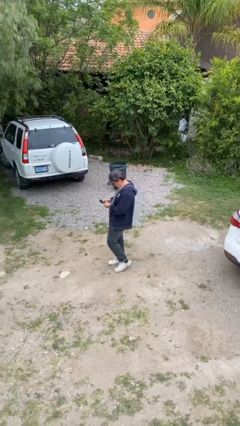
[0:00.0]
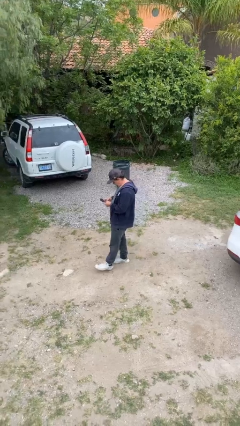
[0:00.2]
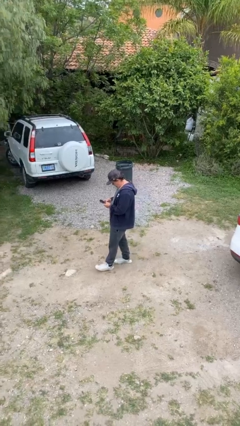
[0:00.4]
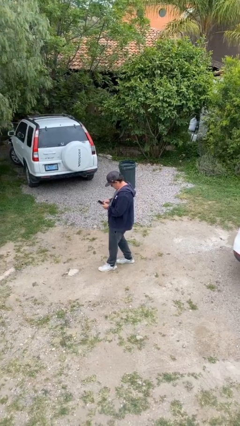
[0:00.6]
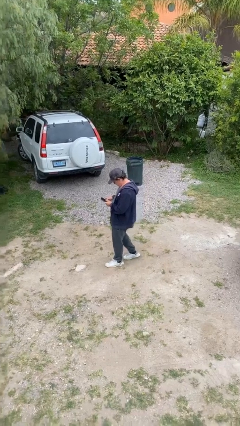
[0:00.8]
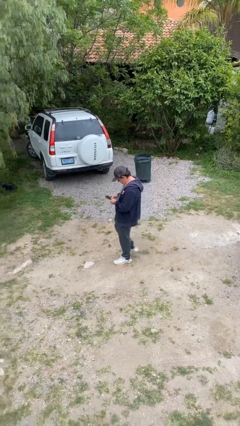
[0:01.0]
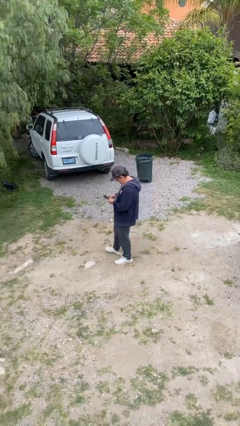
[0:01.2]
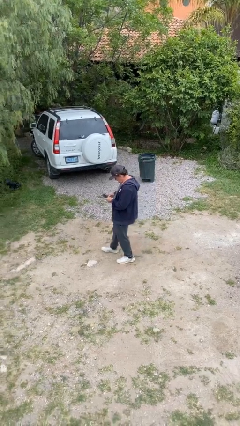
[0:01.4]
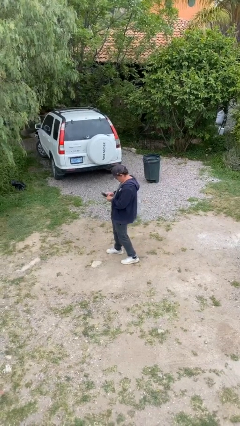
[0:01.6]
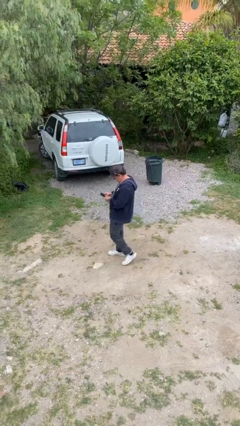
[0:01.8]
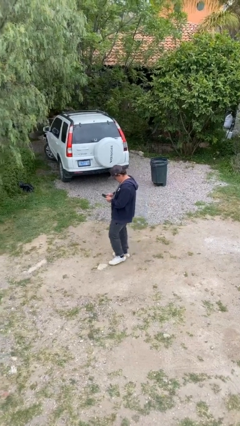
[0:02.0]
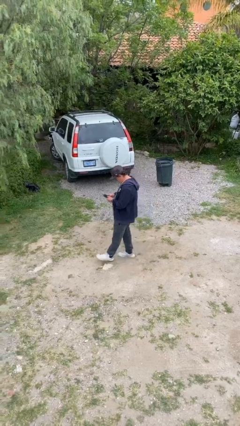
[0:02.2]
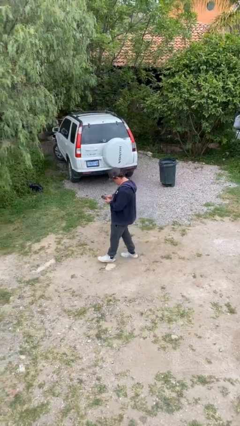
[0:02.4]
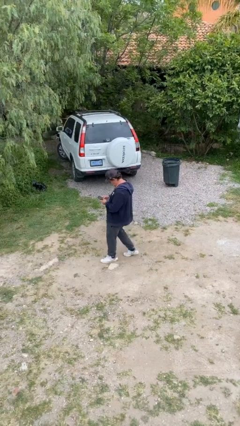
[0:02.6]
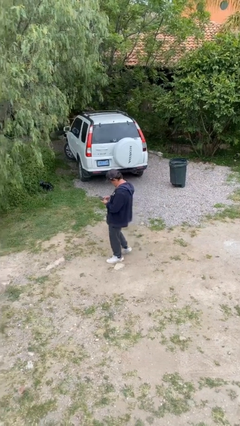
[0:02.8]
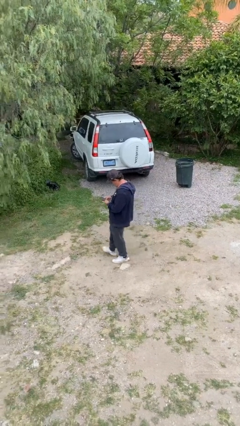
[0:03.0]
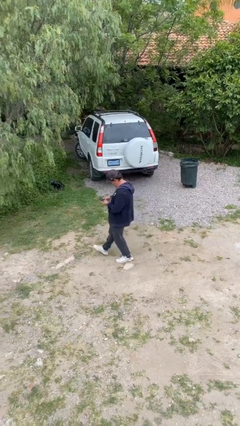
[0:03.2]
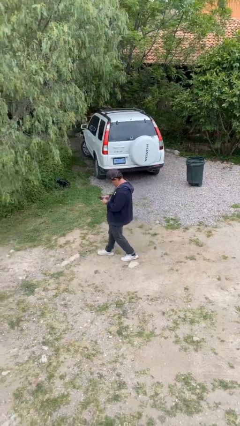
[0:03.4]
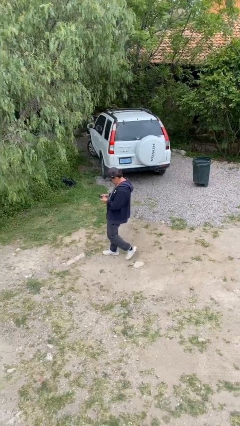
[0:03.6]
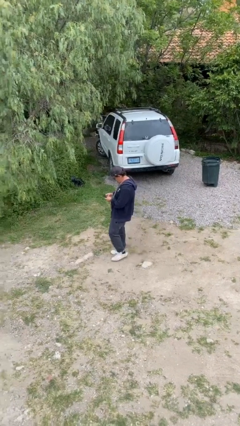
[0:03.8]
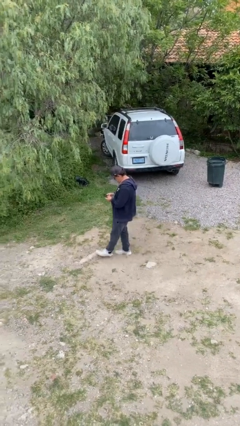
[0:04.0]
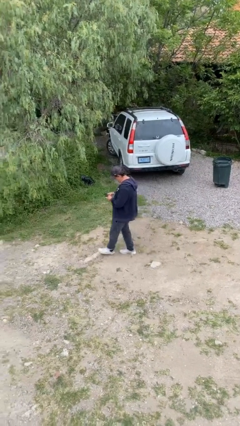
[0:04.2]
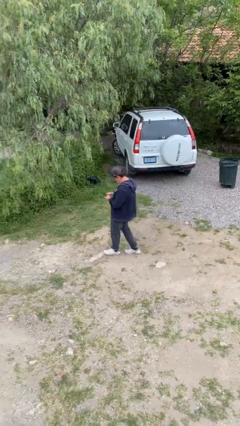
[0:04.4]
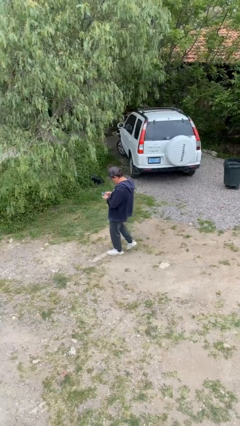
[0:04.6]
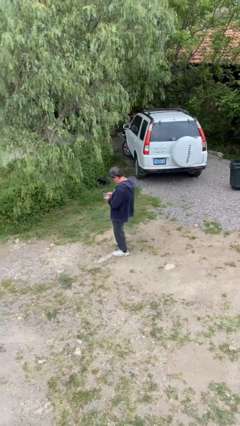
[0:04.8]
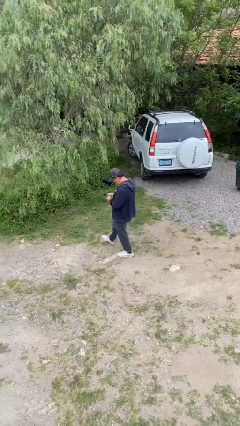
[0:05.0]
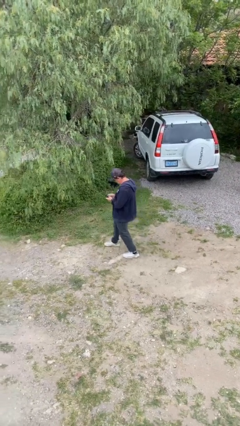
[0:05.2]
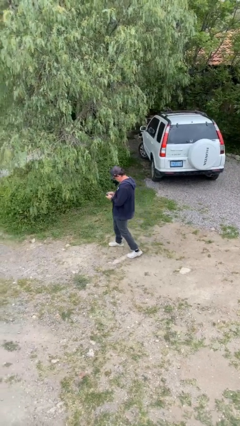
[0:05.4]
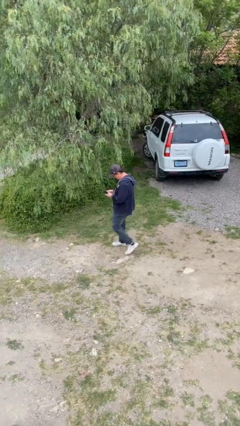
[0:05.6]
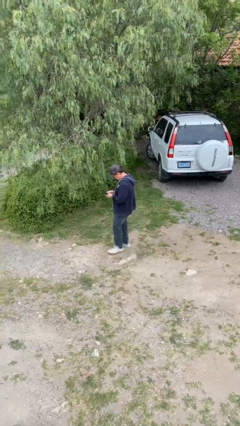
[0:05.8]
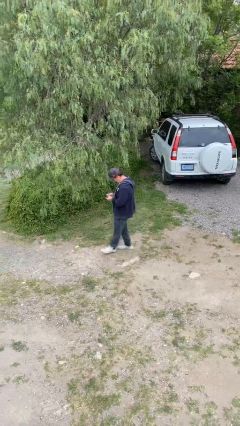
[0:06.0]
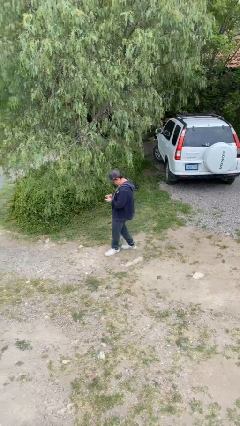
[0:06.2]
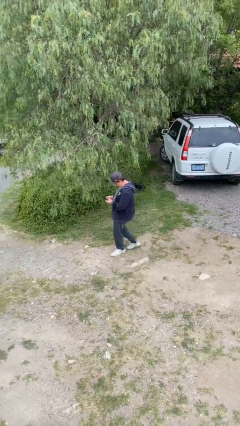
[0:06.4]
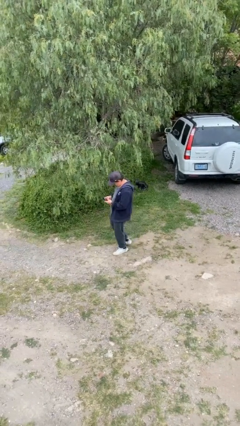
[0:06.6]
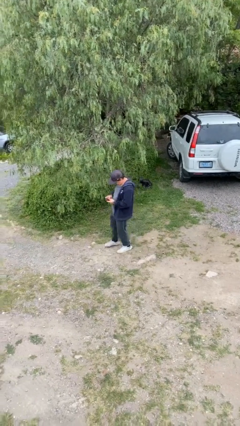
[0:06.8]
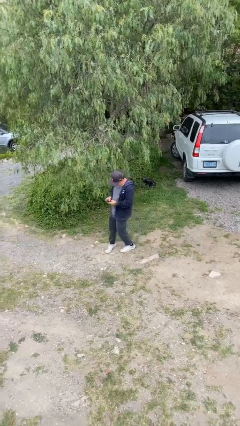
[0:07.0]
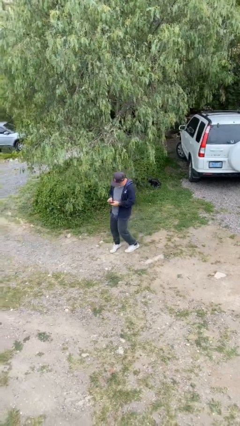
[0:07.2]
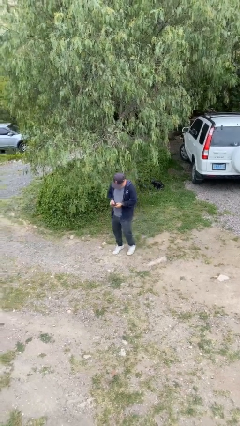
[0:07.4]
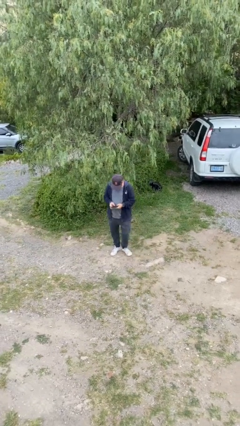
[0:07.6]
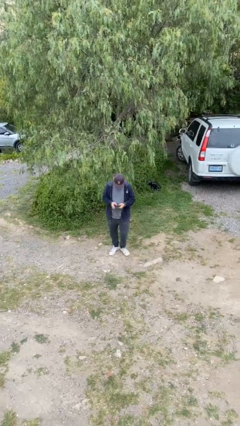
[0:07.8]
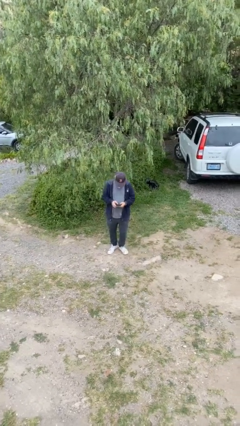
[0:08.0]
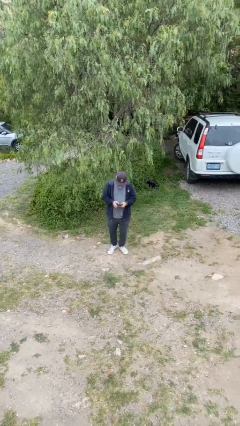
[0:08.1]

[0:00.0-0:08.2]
person texts on phone

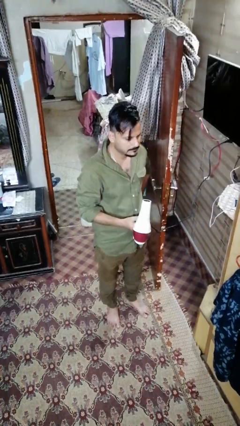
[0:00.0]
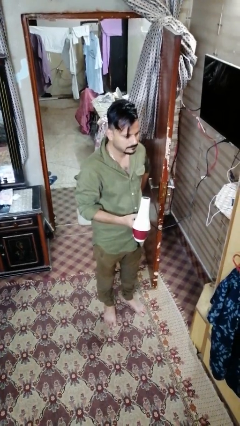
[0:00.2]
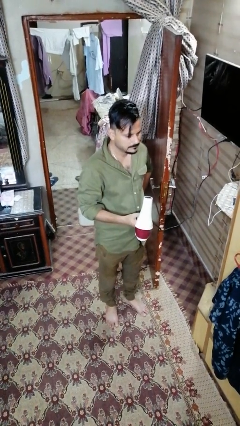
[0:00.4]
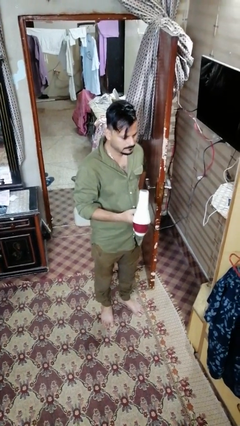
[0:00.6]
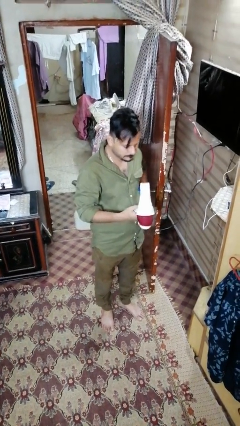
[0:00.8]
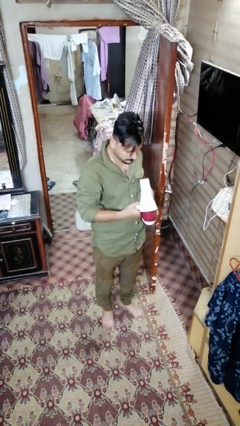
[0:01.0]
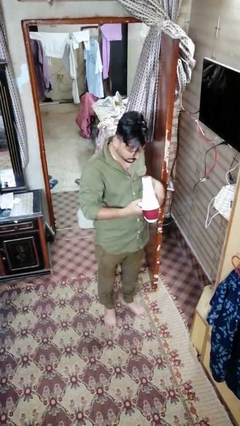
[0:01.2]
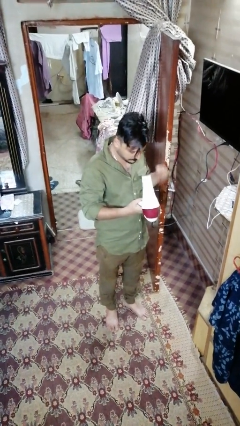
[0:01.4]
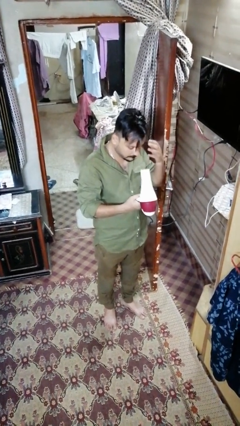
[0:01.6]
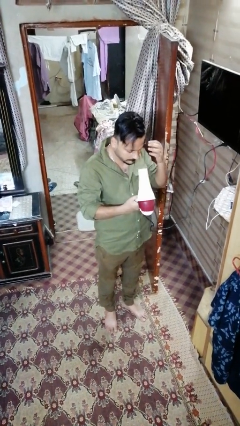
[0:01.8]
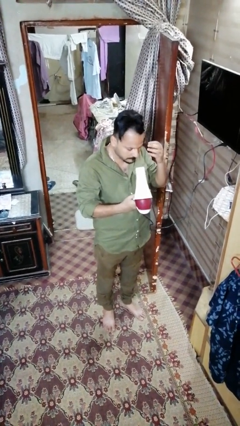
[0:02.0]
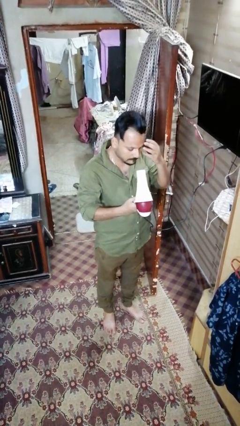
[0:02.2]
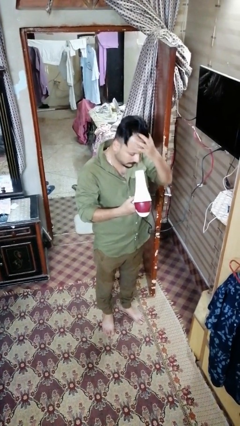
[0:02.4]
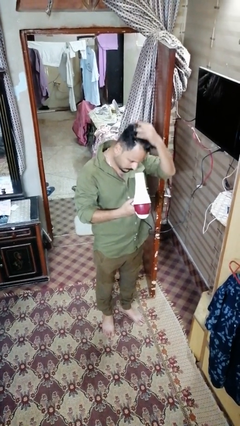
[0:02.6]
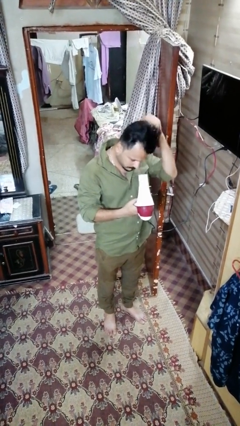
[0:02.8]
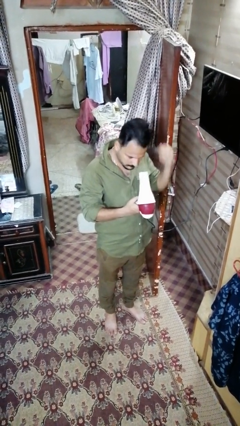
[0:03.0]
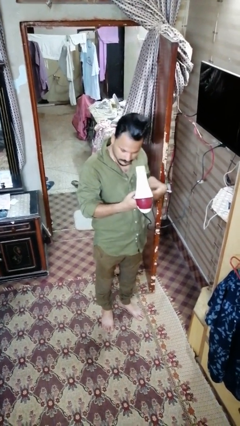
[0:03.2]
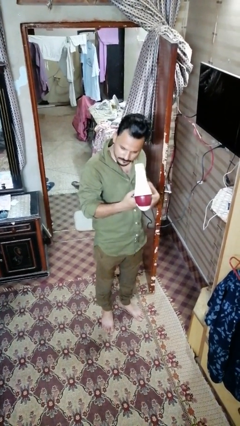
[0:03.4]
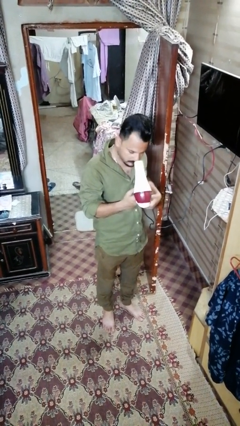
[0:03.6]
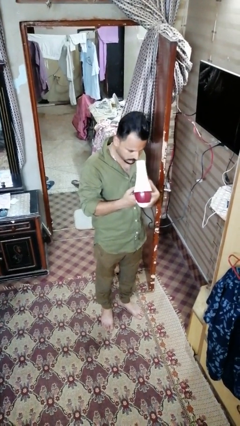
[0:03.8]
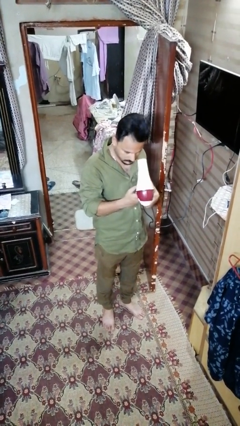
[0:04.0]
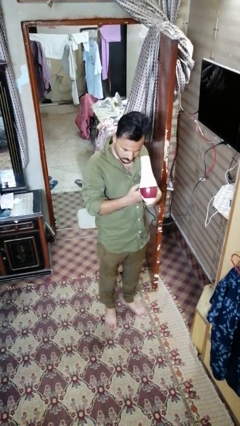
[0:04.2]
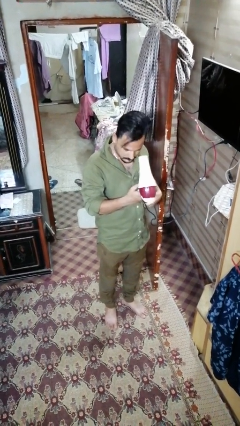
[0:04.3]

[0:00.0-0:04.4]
person dries hair with hairdryer

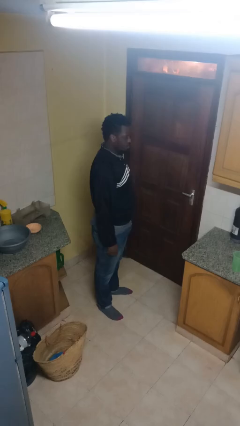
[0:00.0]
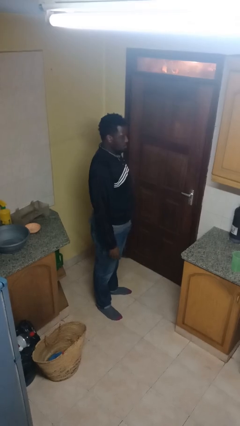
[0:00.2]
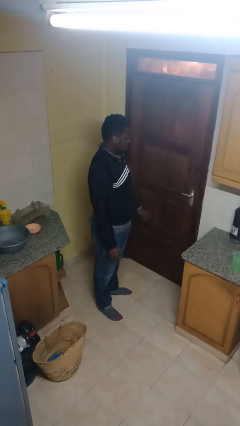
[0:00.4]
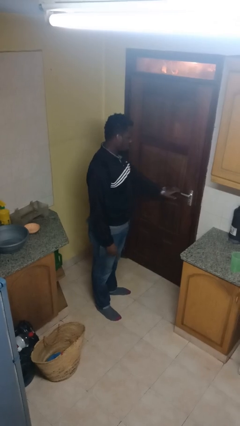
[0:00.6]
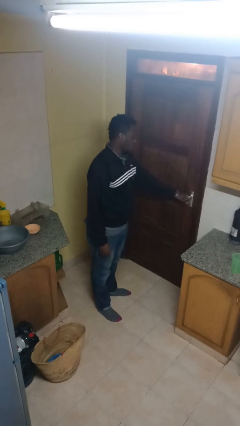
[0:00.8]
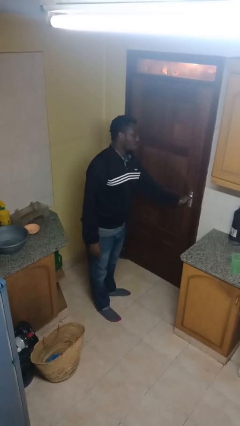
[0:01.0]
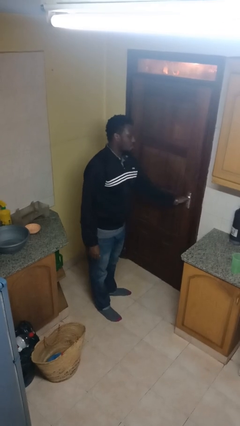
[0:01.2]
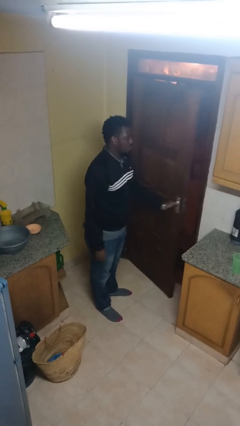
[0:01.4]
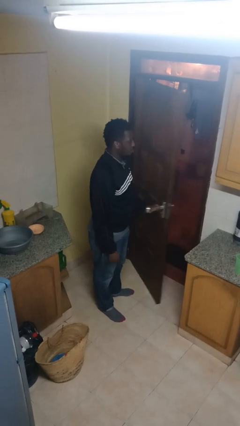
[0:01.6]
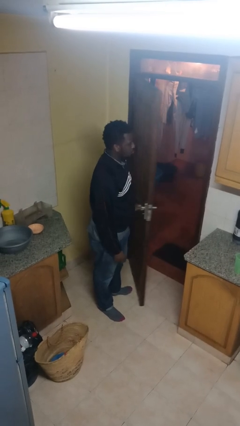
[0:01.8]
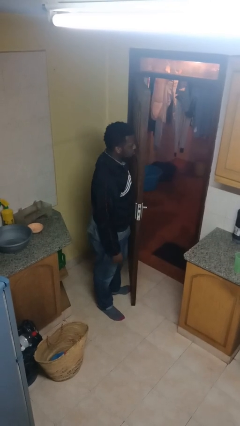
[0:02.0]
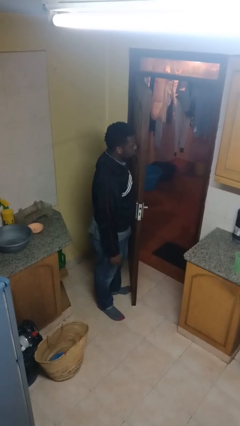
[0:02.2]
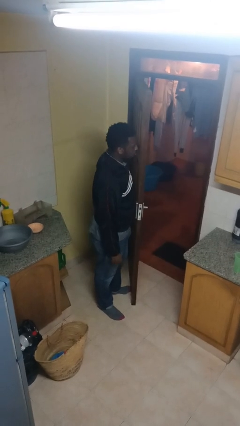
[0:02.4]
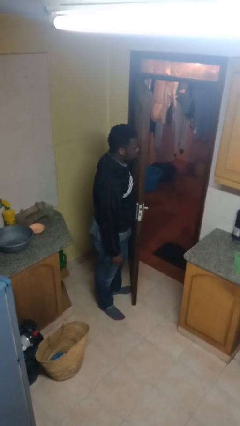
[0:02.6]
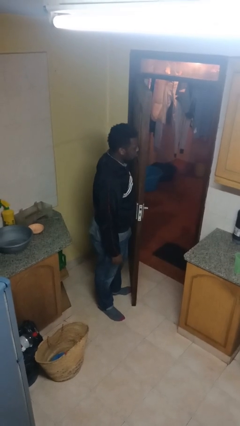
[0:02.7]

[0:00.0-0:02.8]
person opens facility door

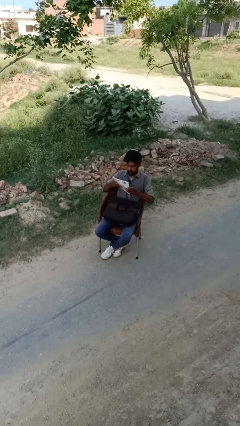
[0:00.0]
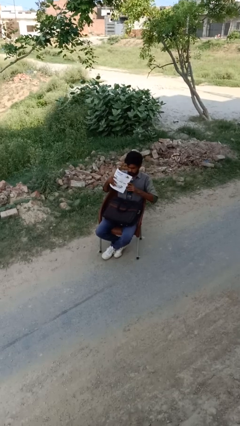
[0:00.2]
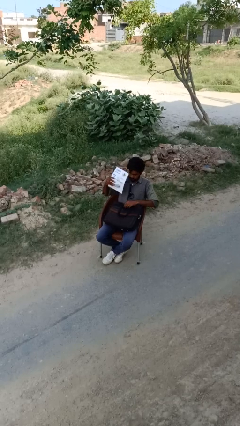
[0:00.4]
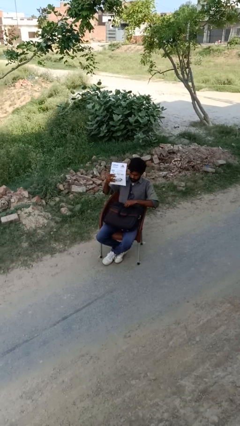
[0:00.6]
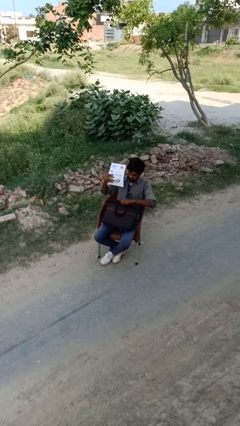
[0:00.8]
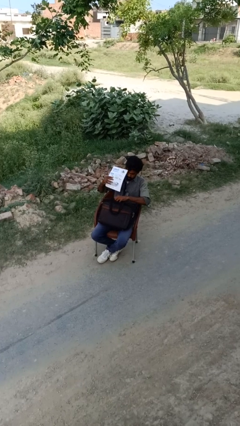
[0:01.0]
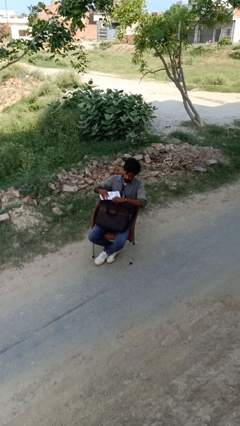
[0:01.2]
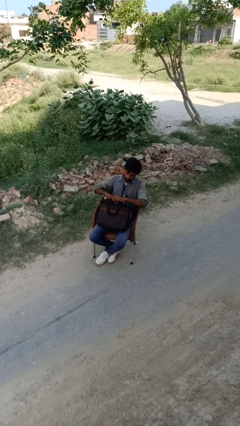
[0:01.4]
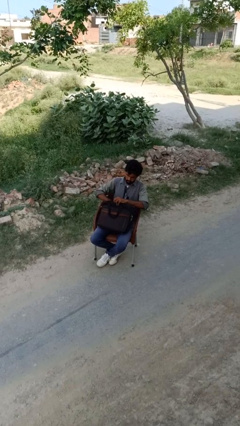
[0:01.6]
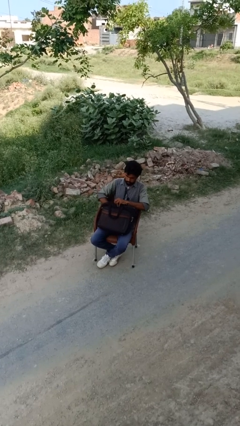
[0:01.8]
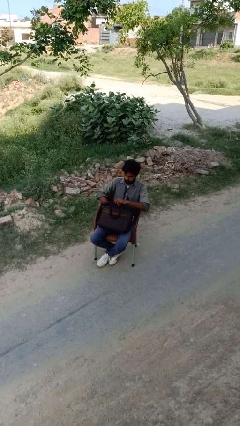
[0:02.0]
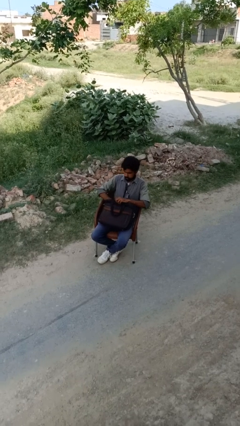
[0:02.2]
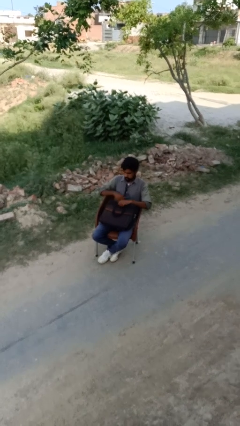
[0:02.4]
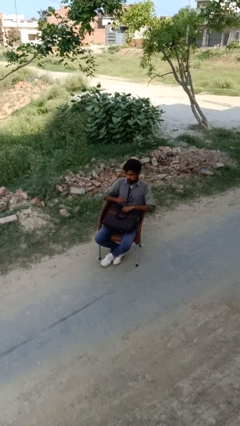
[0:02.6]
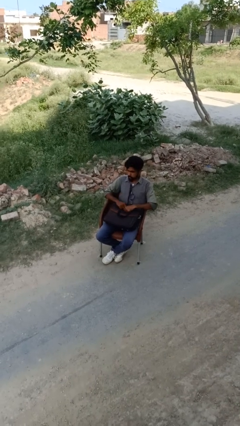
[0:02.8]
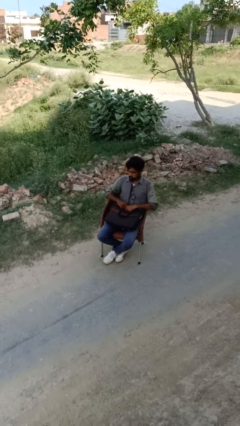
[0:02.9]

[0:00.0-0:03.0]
person puts object into backpack
